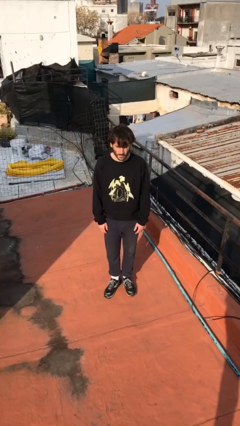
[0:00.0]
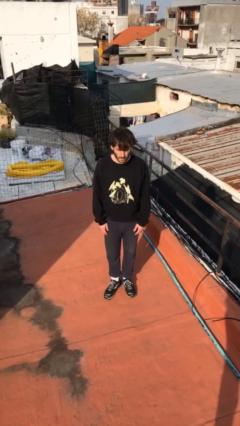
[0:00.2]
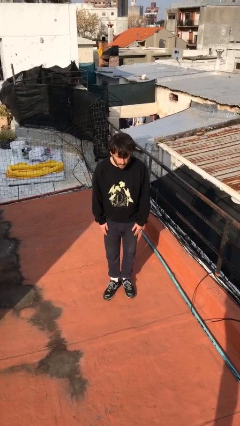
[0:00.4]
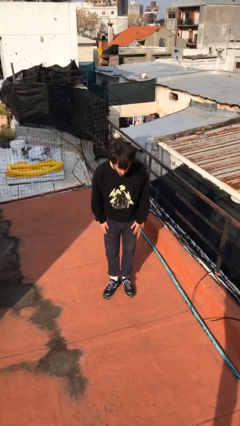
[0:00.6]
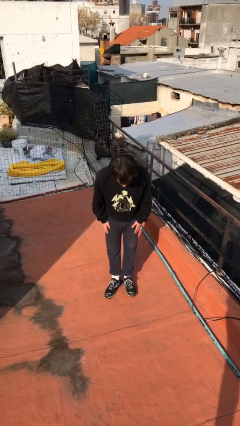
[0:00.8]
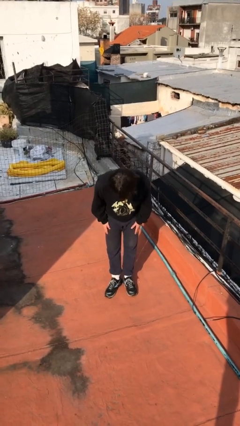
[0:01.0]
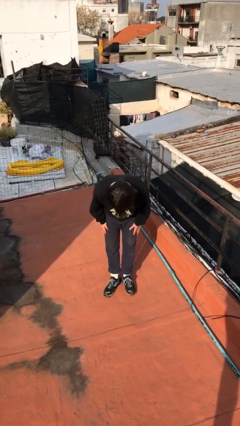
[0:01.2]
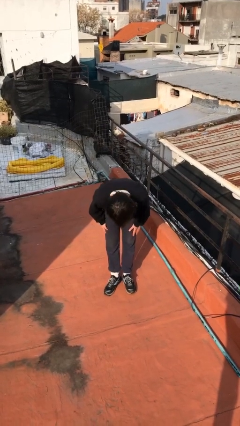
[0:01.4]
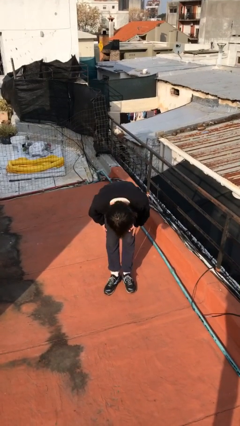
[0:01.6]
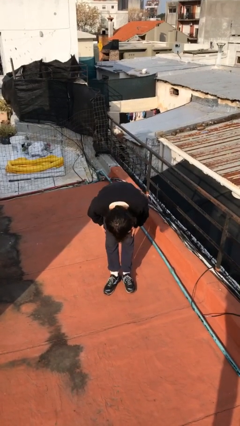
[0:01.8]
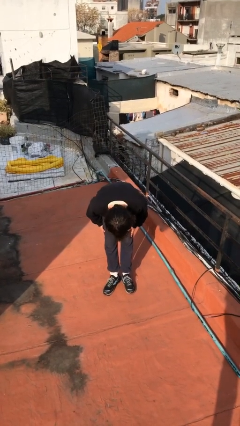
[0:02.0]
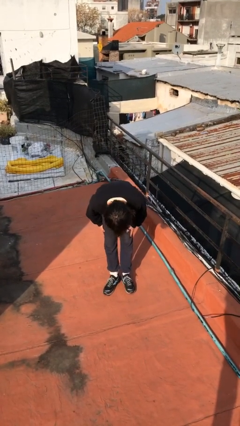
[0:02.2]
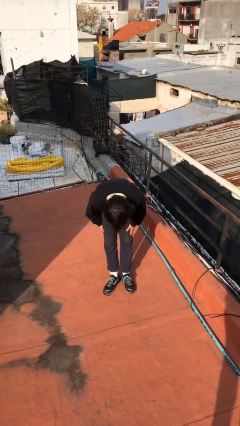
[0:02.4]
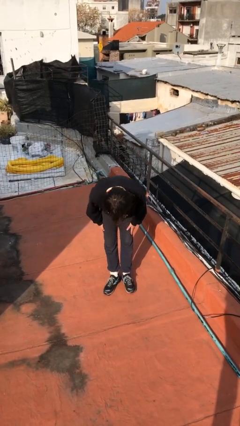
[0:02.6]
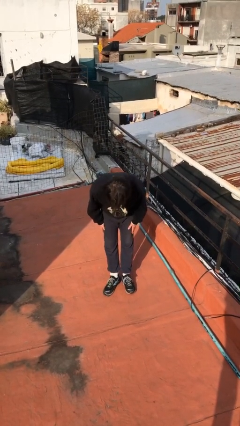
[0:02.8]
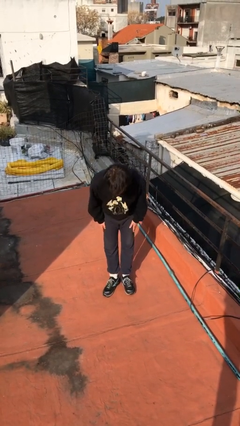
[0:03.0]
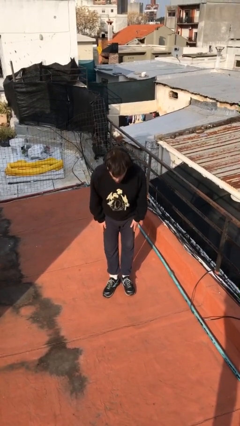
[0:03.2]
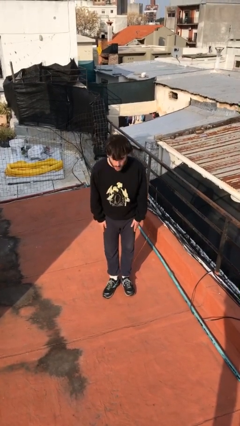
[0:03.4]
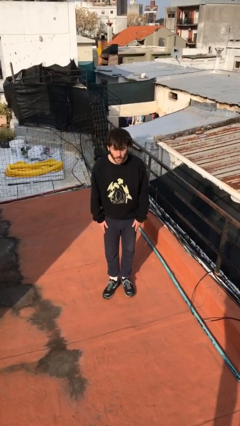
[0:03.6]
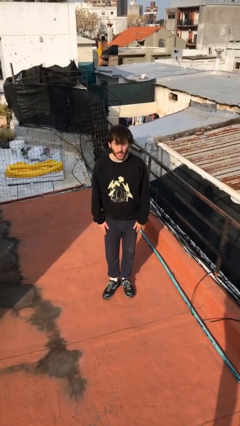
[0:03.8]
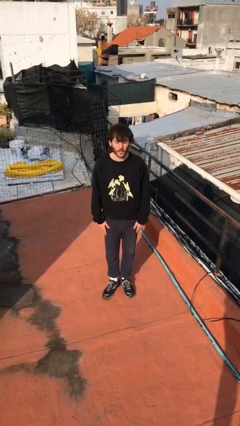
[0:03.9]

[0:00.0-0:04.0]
person bows

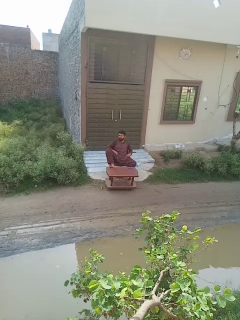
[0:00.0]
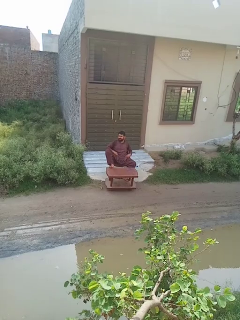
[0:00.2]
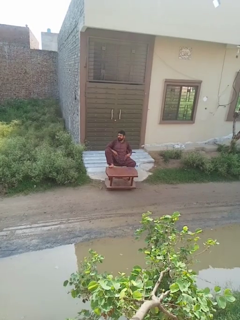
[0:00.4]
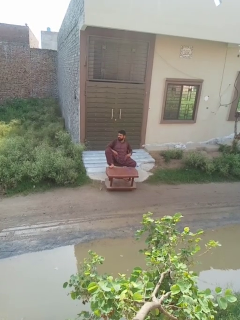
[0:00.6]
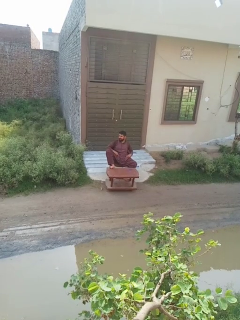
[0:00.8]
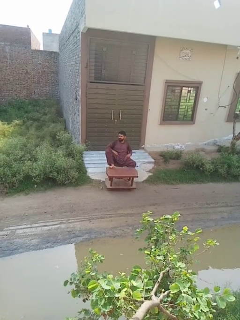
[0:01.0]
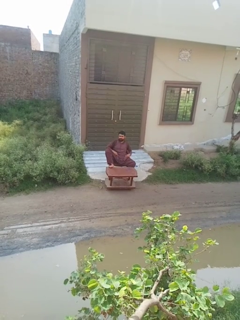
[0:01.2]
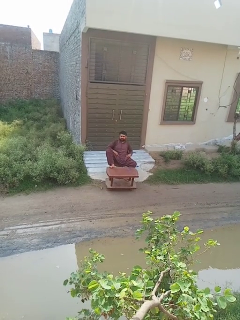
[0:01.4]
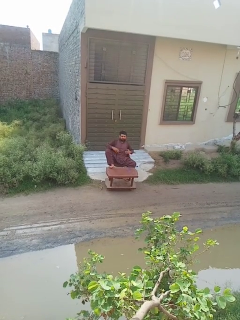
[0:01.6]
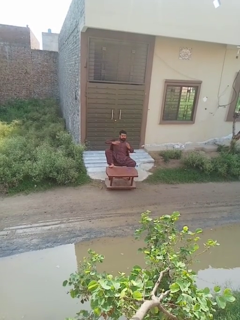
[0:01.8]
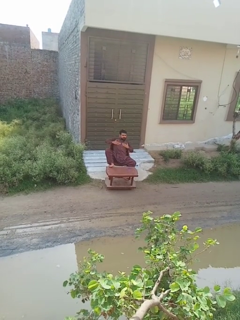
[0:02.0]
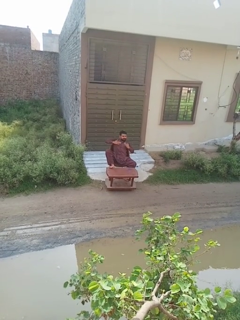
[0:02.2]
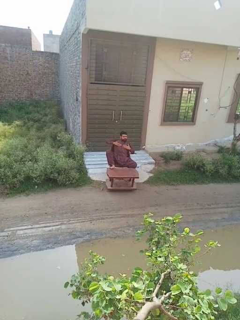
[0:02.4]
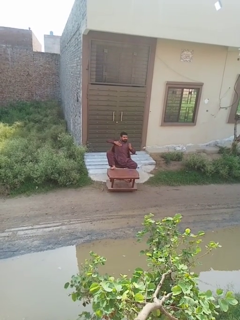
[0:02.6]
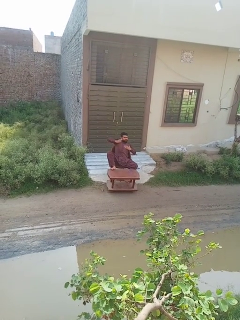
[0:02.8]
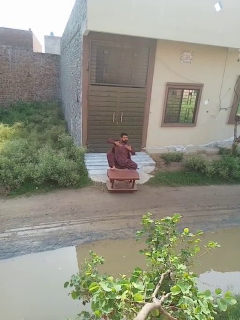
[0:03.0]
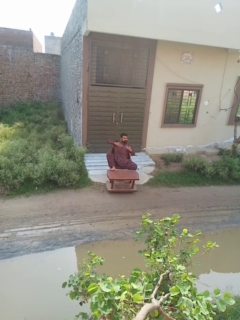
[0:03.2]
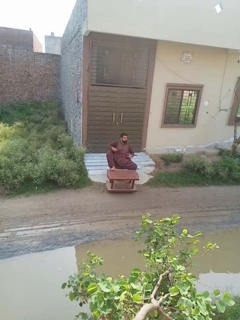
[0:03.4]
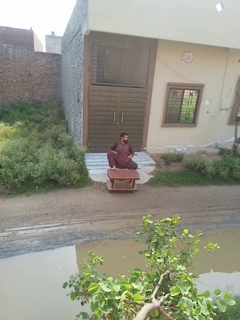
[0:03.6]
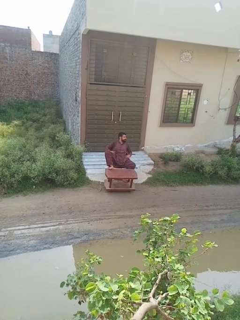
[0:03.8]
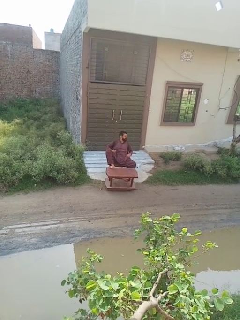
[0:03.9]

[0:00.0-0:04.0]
person drums on chest

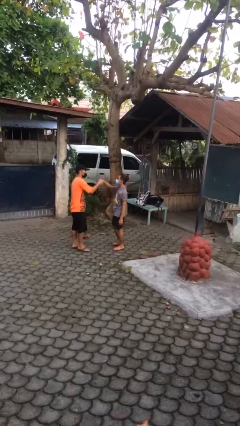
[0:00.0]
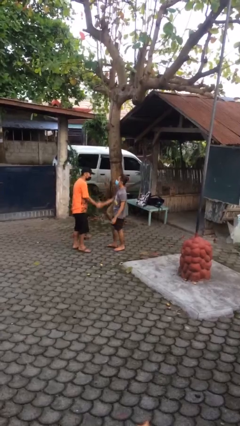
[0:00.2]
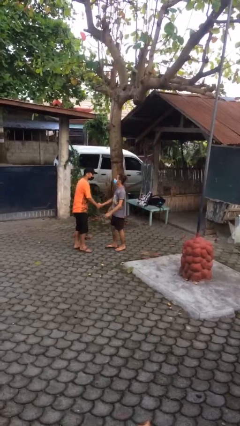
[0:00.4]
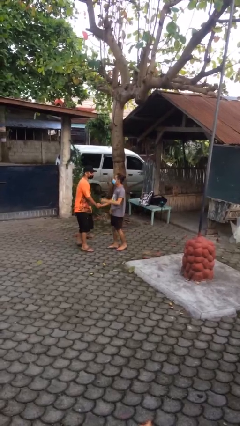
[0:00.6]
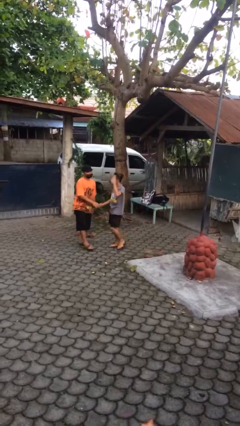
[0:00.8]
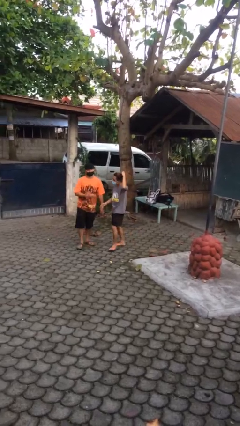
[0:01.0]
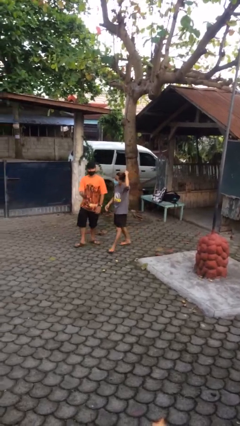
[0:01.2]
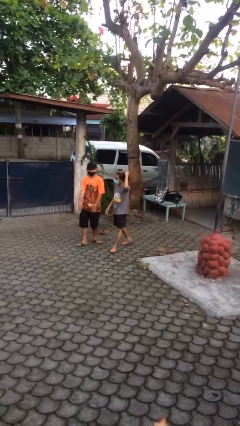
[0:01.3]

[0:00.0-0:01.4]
person shakes hand

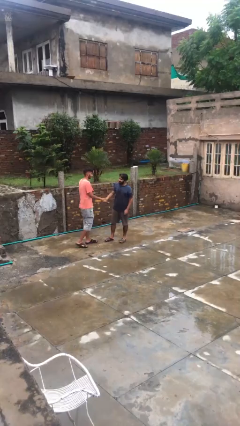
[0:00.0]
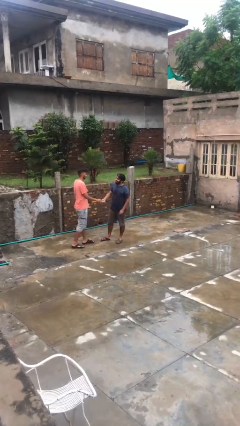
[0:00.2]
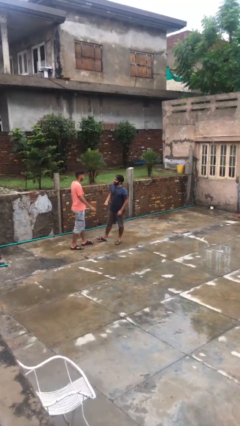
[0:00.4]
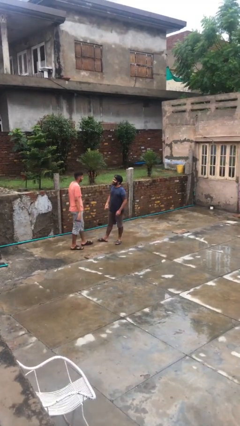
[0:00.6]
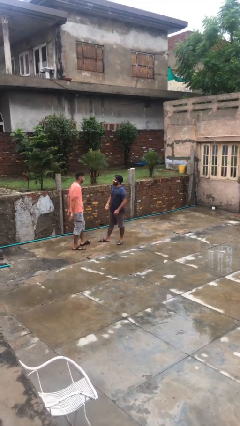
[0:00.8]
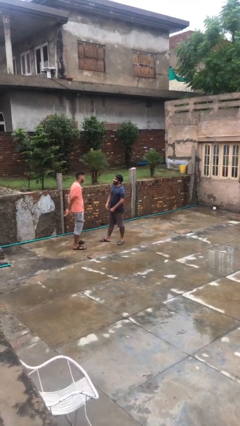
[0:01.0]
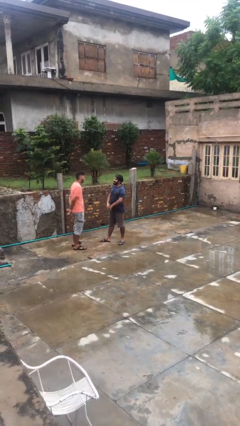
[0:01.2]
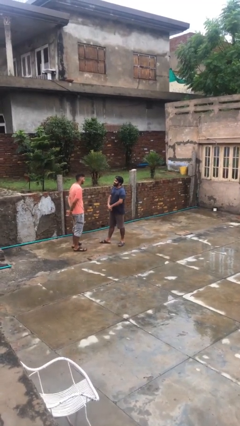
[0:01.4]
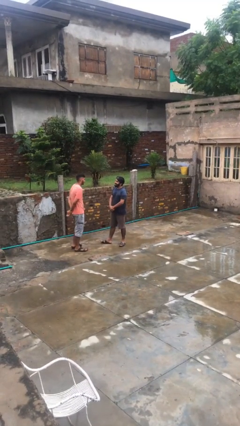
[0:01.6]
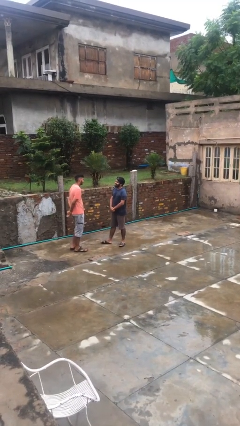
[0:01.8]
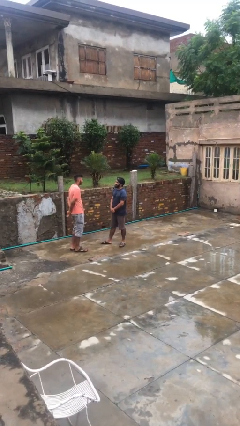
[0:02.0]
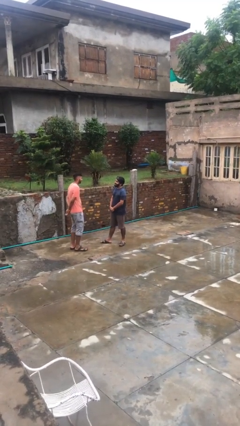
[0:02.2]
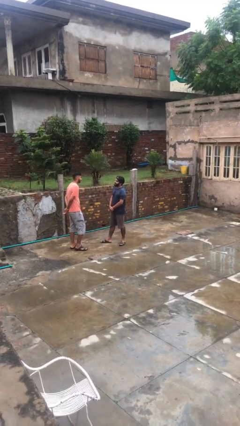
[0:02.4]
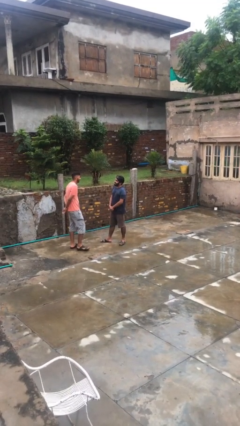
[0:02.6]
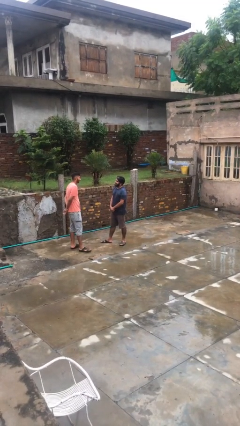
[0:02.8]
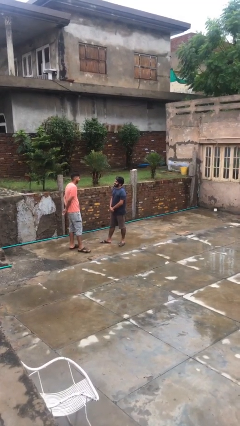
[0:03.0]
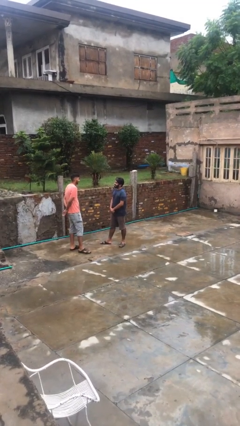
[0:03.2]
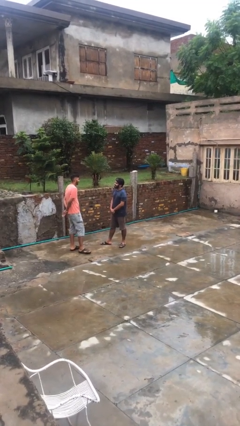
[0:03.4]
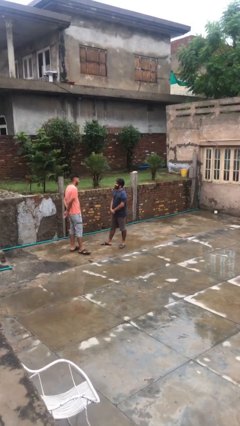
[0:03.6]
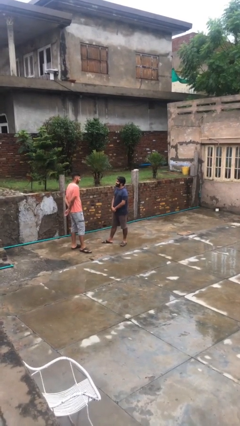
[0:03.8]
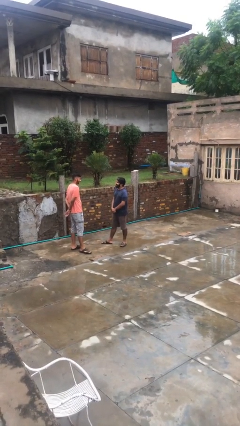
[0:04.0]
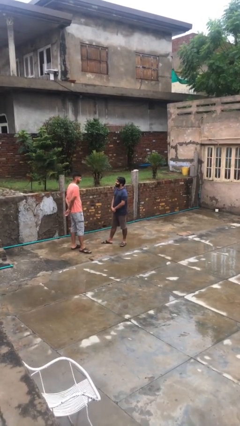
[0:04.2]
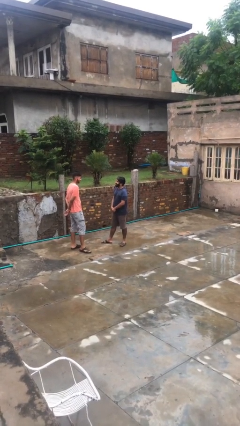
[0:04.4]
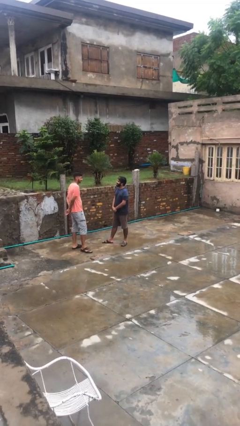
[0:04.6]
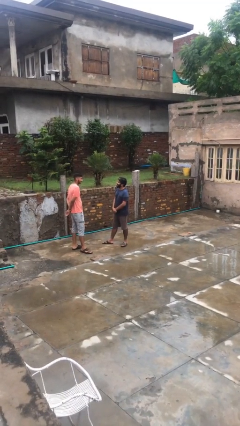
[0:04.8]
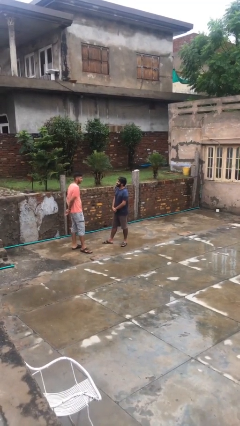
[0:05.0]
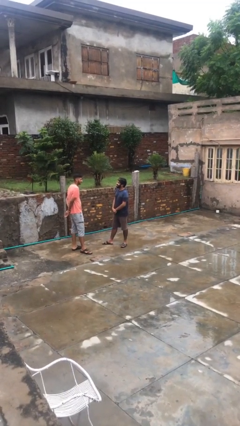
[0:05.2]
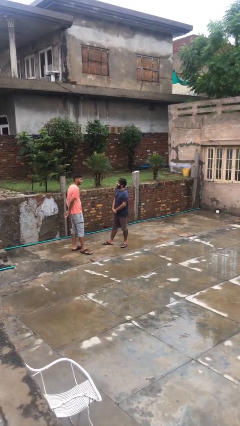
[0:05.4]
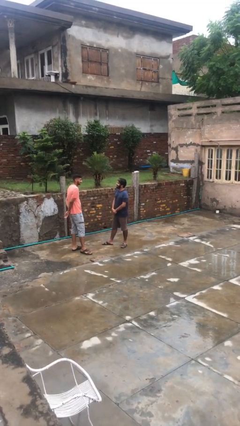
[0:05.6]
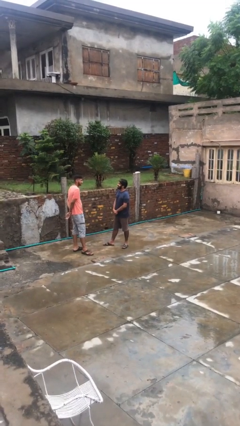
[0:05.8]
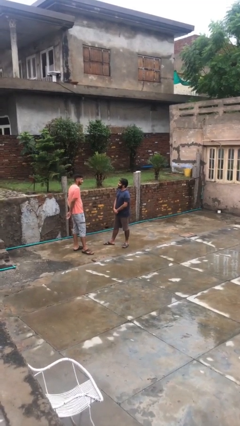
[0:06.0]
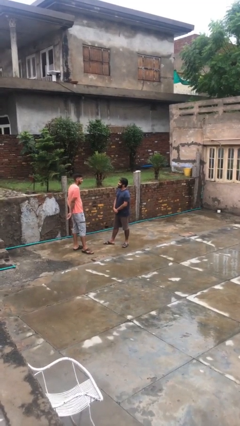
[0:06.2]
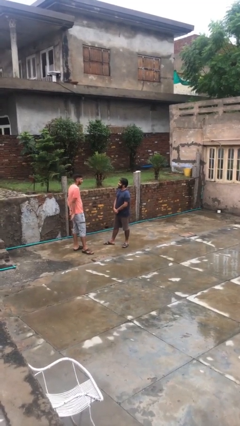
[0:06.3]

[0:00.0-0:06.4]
person talks to person

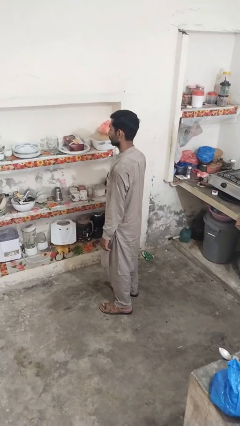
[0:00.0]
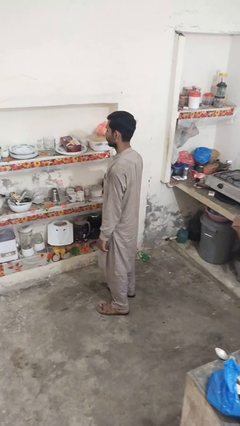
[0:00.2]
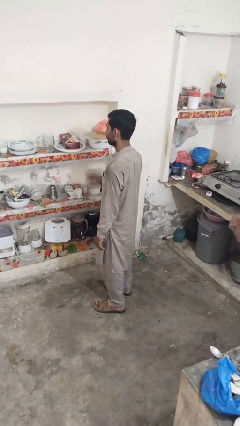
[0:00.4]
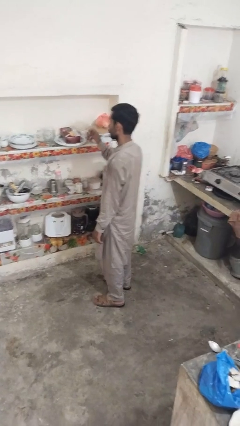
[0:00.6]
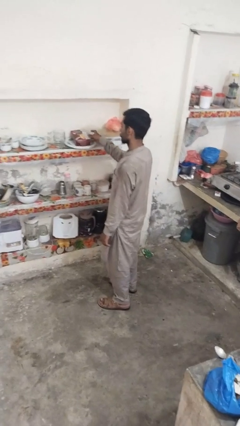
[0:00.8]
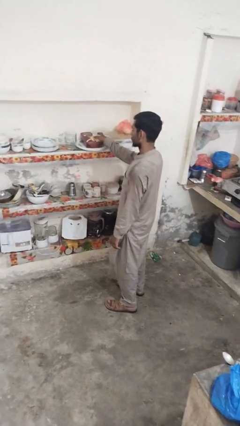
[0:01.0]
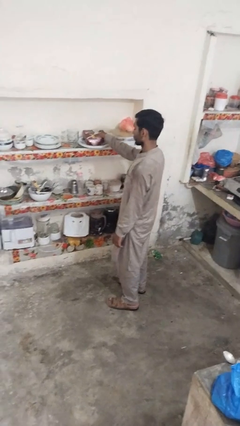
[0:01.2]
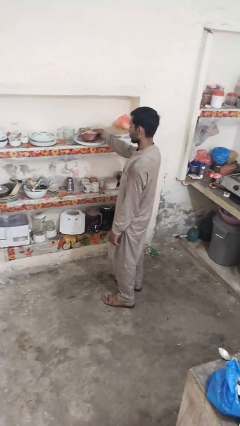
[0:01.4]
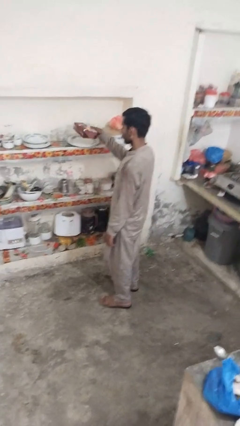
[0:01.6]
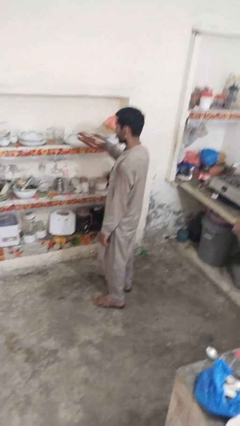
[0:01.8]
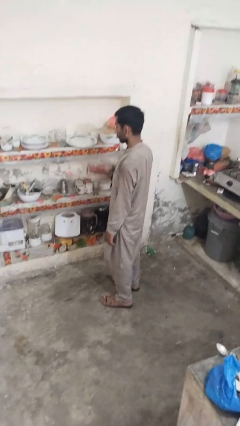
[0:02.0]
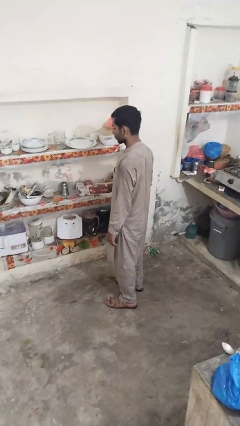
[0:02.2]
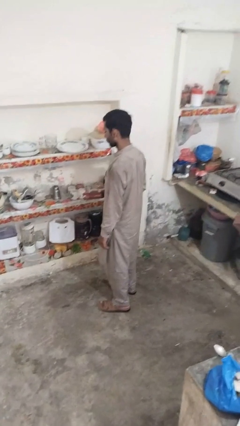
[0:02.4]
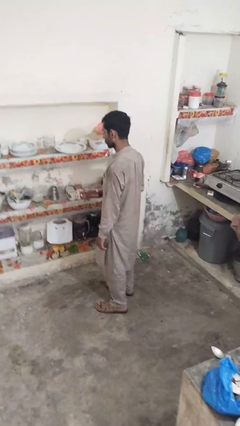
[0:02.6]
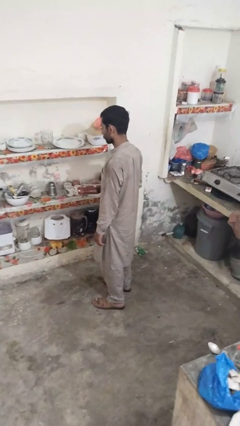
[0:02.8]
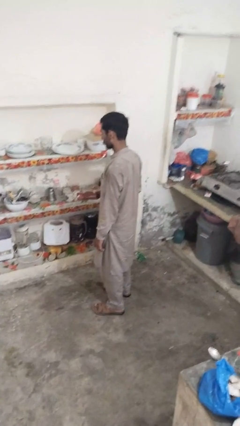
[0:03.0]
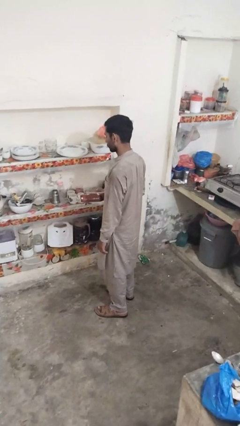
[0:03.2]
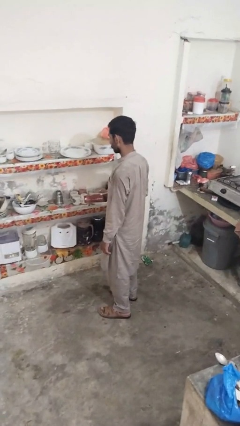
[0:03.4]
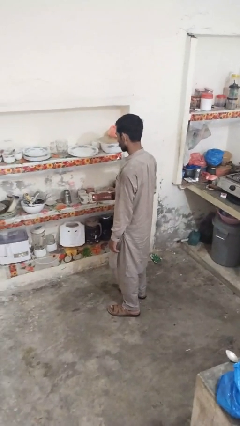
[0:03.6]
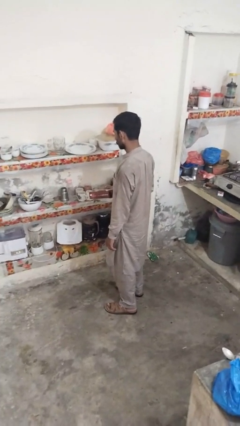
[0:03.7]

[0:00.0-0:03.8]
person picks up object from cabinet
